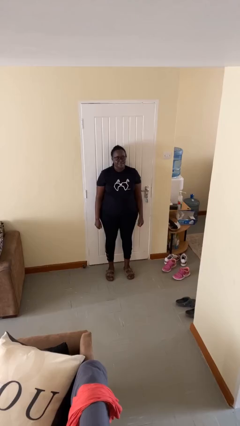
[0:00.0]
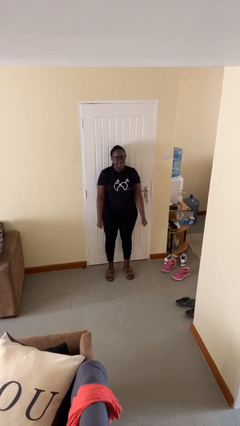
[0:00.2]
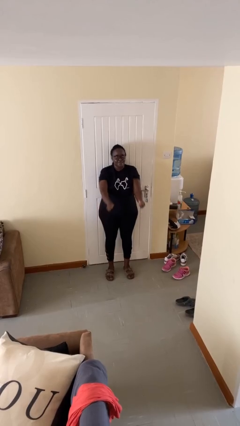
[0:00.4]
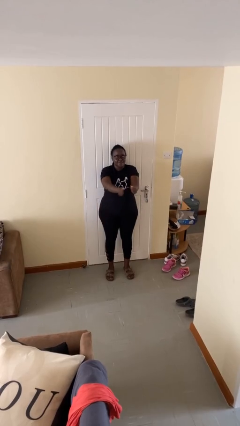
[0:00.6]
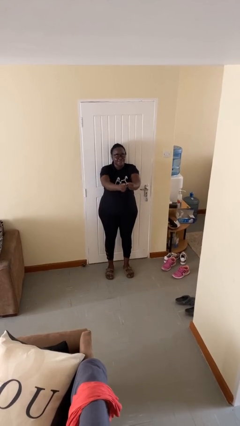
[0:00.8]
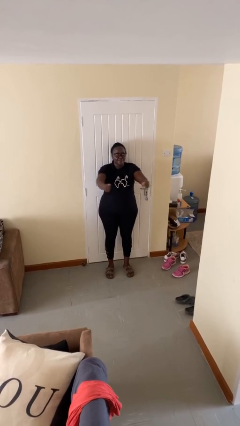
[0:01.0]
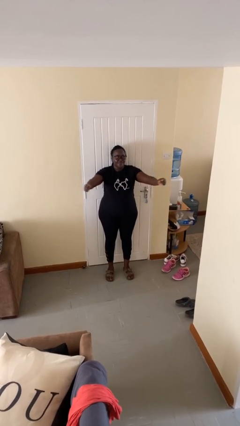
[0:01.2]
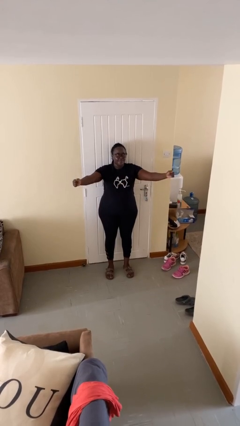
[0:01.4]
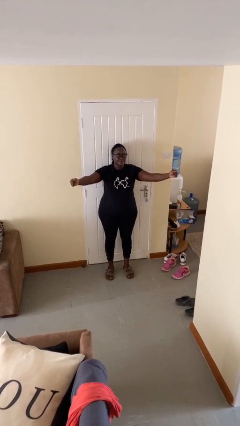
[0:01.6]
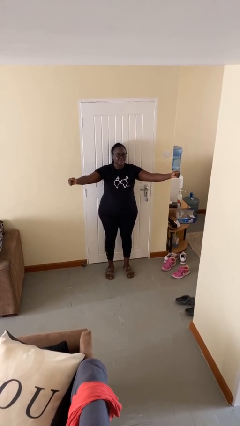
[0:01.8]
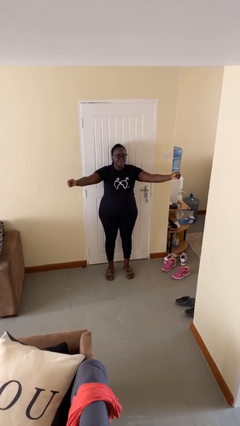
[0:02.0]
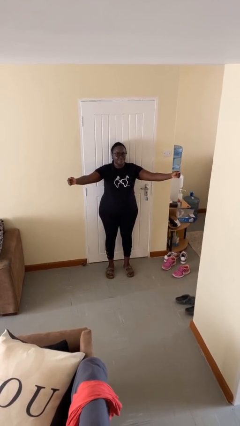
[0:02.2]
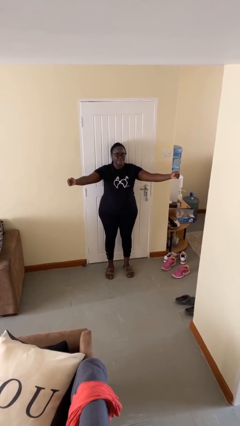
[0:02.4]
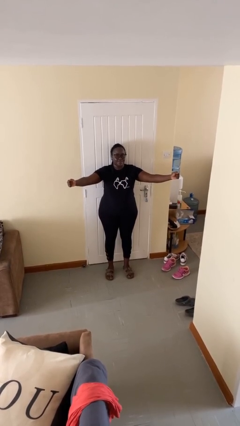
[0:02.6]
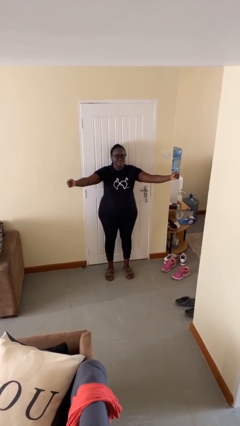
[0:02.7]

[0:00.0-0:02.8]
person gestures zoom in

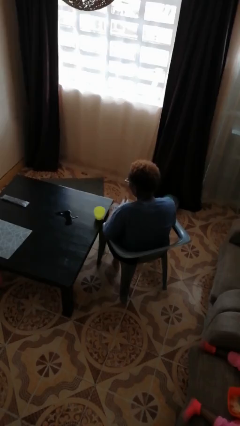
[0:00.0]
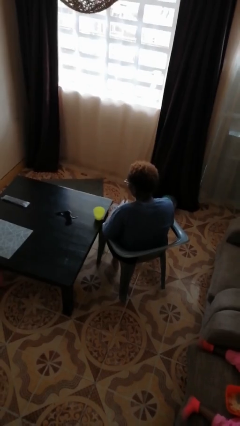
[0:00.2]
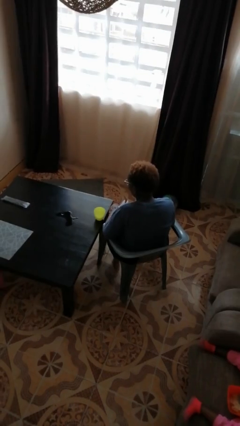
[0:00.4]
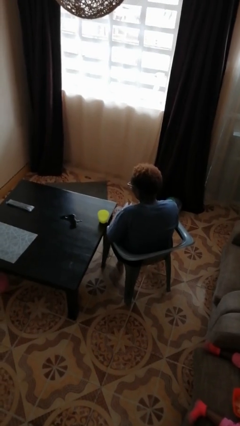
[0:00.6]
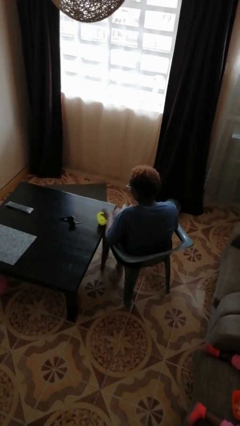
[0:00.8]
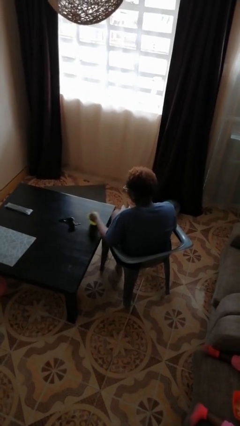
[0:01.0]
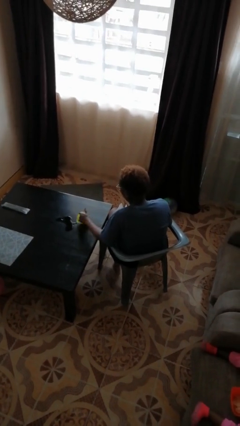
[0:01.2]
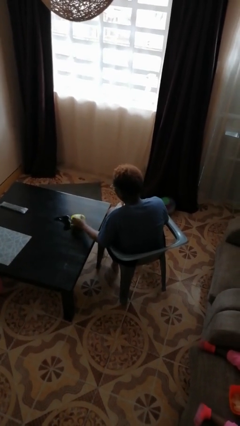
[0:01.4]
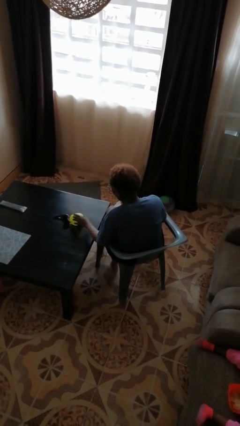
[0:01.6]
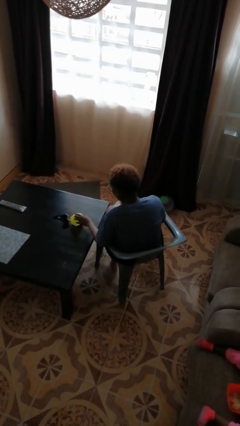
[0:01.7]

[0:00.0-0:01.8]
person spills on table

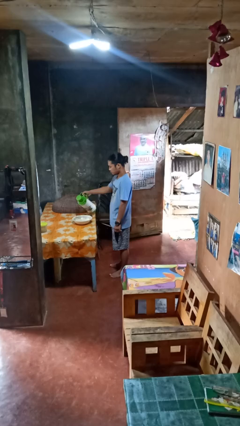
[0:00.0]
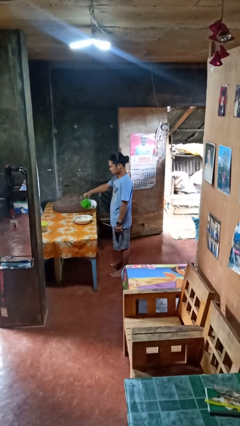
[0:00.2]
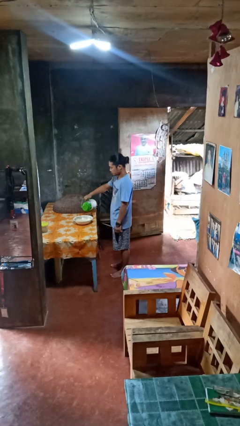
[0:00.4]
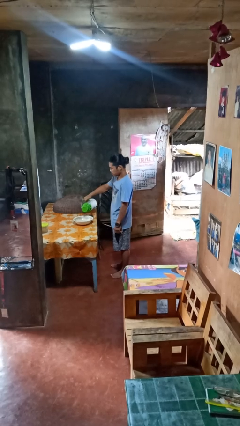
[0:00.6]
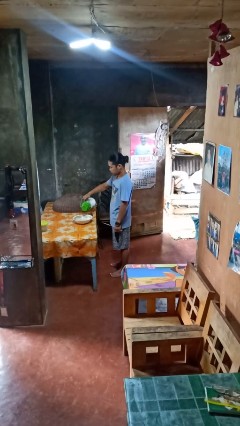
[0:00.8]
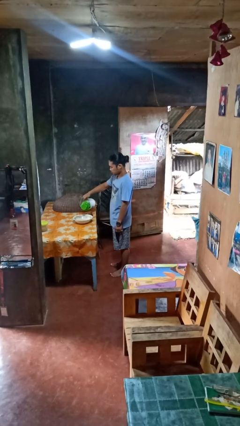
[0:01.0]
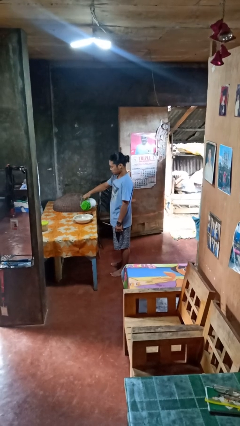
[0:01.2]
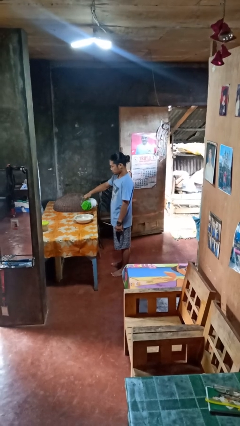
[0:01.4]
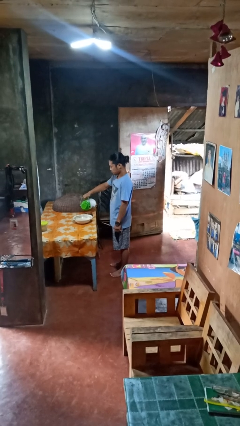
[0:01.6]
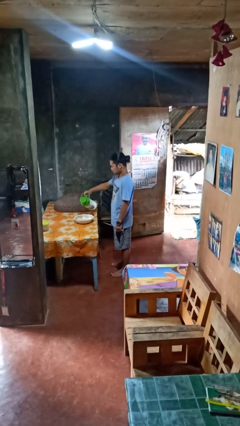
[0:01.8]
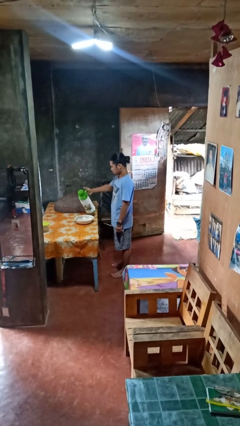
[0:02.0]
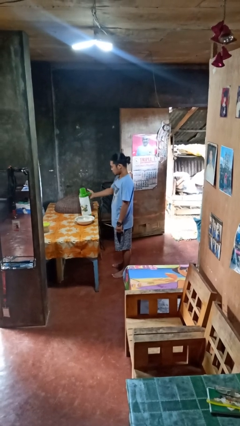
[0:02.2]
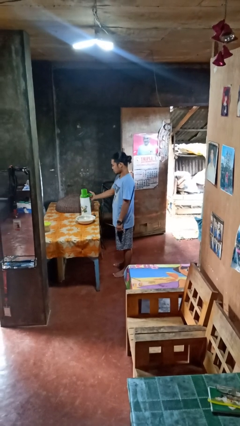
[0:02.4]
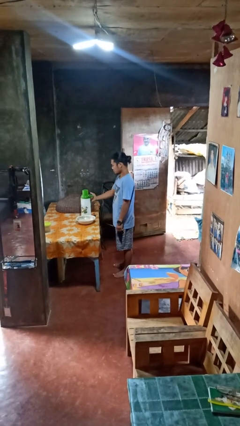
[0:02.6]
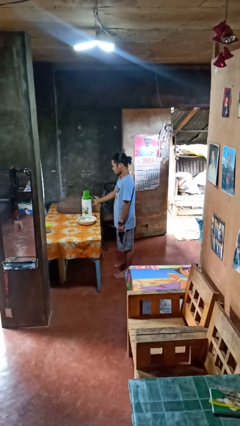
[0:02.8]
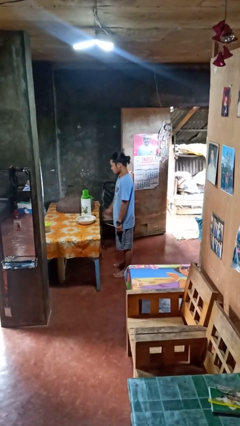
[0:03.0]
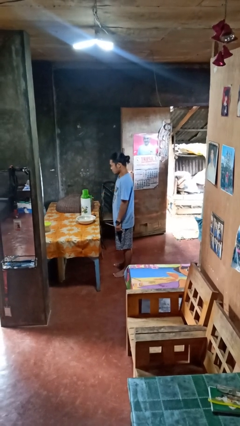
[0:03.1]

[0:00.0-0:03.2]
person pours into bowl

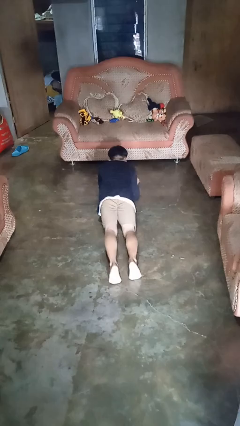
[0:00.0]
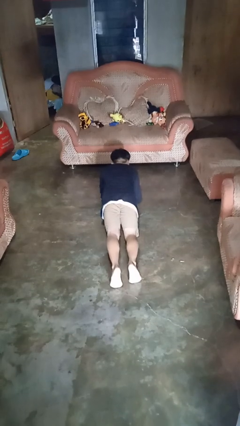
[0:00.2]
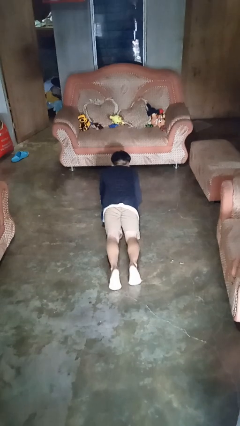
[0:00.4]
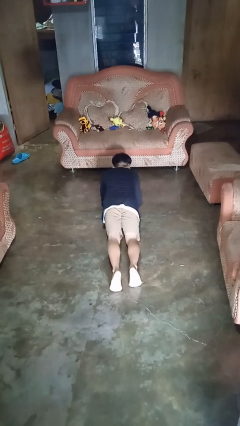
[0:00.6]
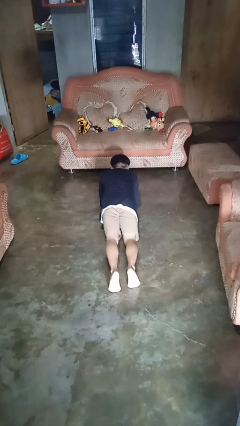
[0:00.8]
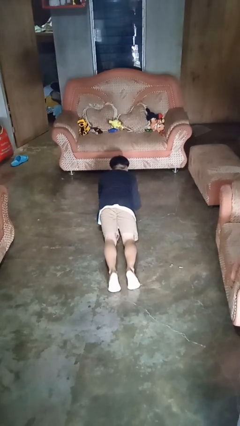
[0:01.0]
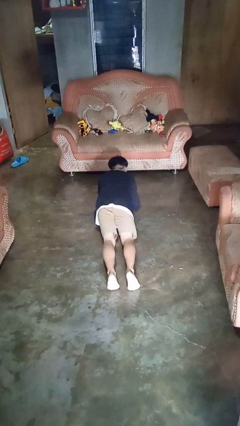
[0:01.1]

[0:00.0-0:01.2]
person exercises with plank

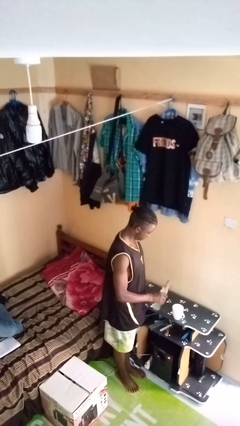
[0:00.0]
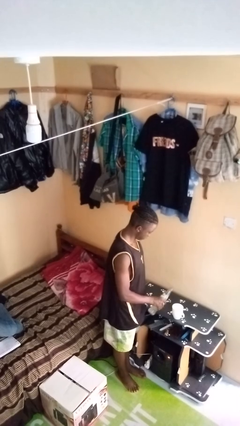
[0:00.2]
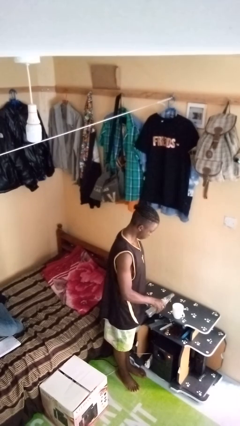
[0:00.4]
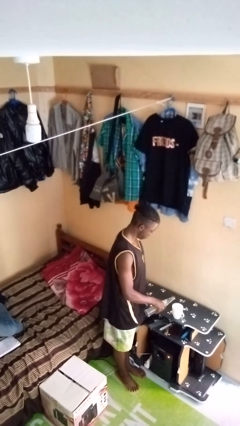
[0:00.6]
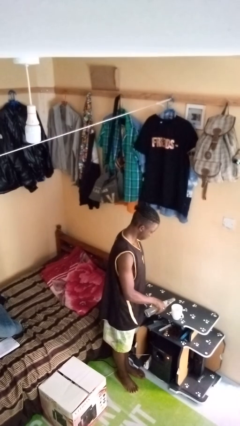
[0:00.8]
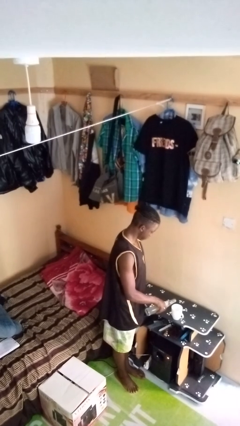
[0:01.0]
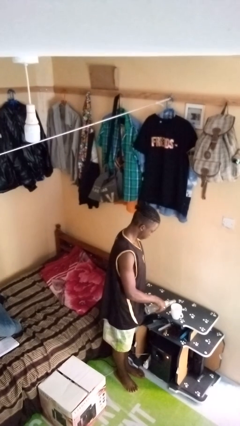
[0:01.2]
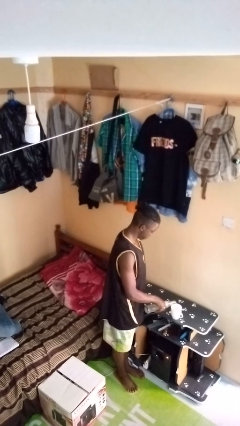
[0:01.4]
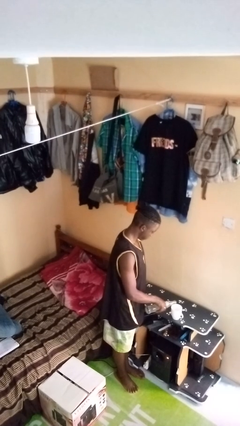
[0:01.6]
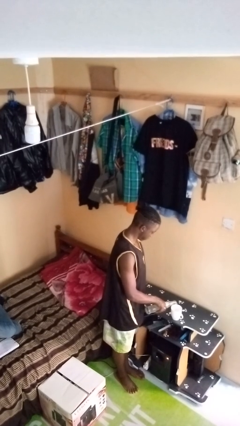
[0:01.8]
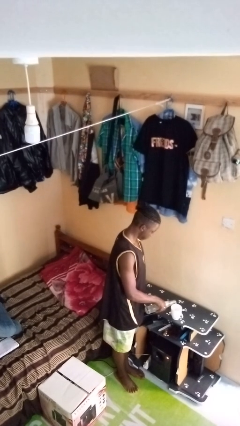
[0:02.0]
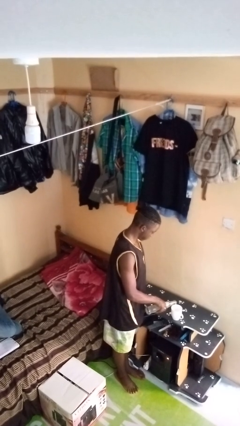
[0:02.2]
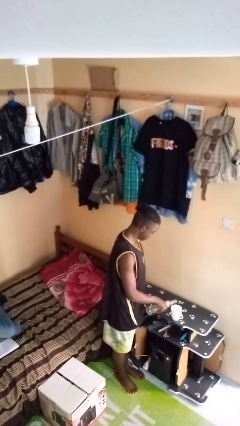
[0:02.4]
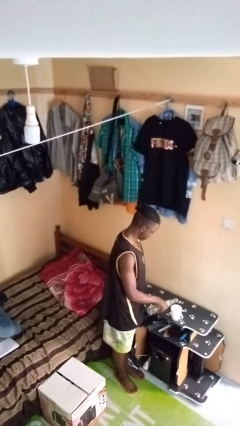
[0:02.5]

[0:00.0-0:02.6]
person pours liquid into cup

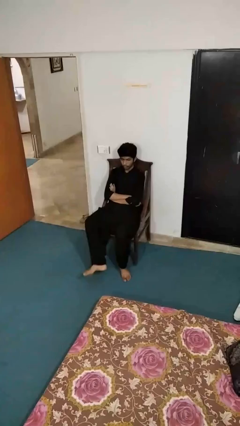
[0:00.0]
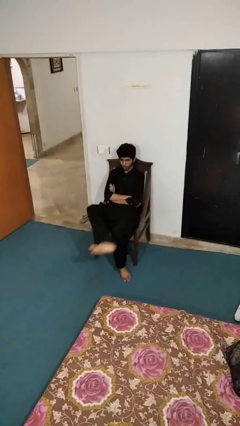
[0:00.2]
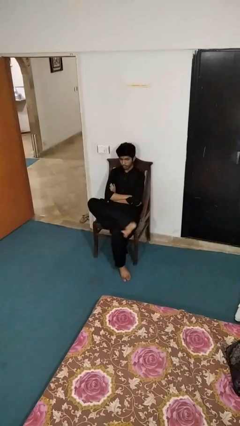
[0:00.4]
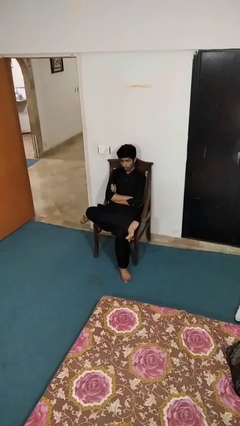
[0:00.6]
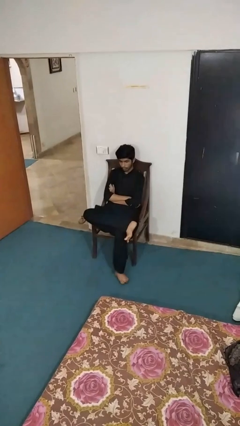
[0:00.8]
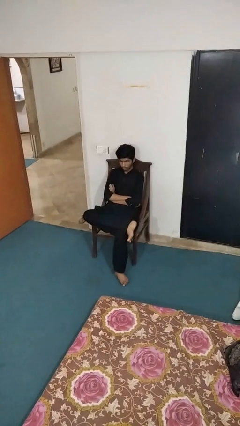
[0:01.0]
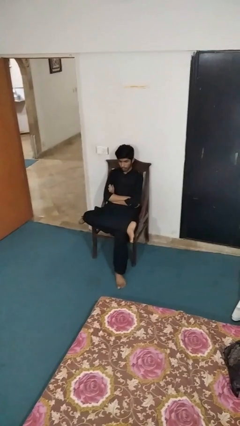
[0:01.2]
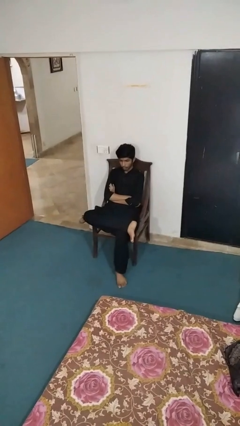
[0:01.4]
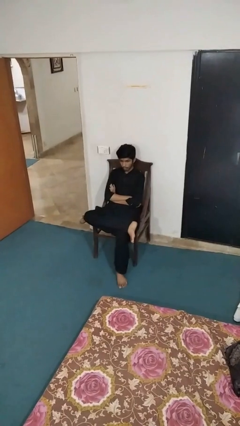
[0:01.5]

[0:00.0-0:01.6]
person crosses legs

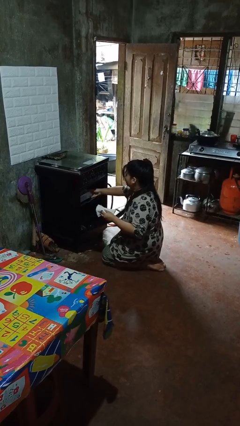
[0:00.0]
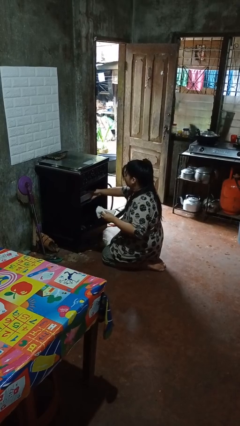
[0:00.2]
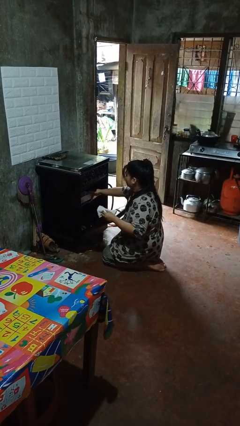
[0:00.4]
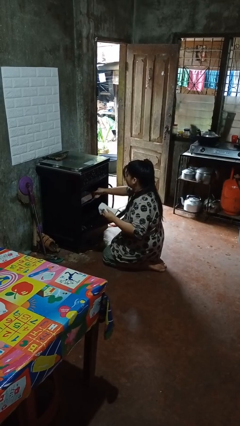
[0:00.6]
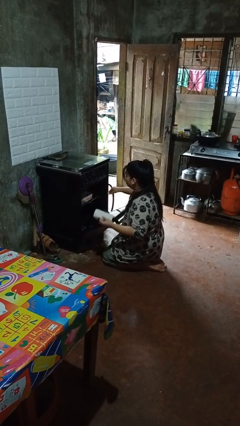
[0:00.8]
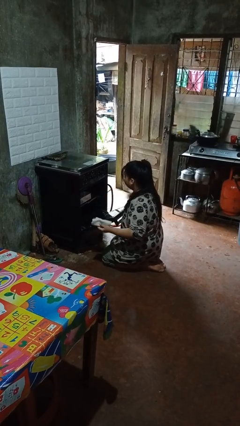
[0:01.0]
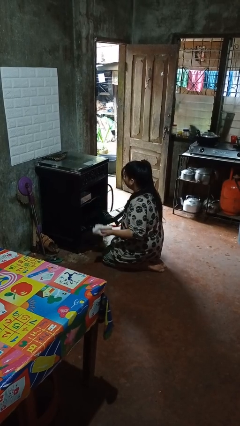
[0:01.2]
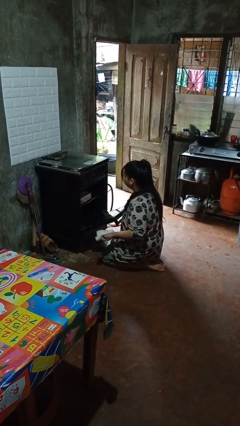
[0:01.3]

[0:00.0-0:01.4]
person puts object into oven

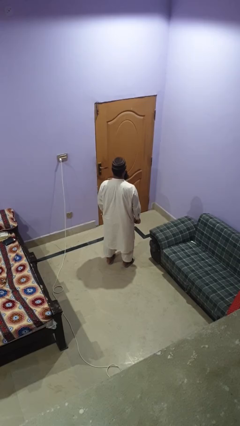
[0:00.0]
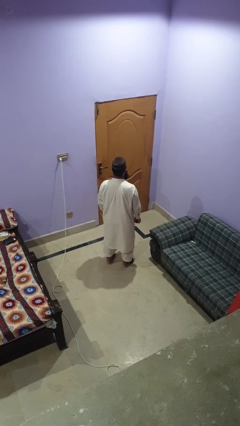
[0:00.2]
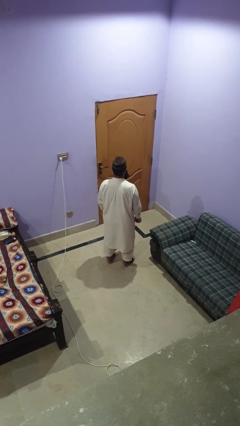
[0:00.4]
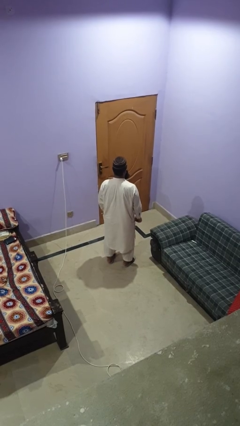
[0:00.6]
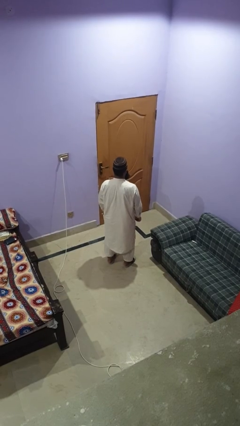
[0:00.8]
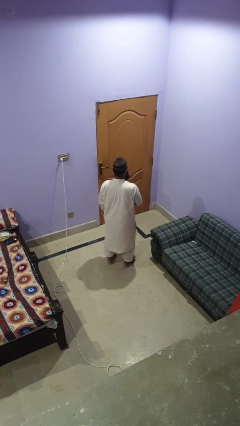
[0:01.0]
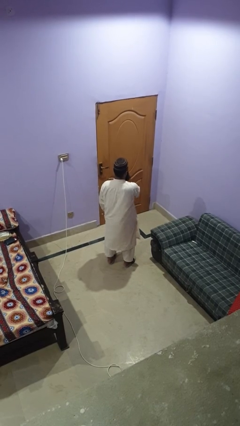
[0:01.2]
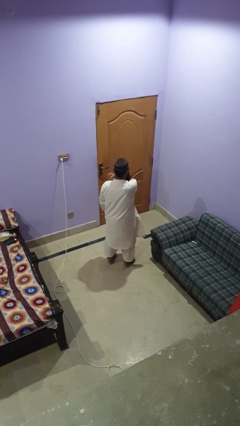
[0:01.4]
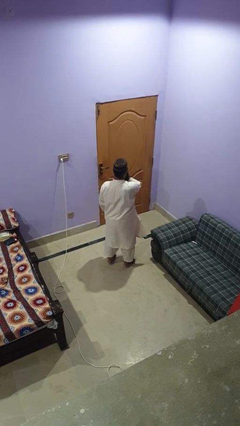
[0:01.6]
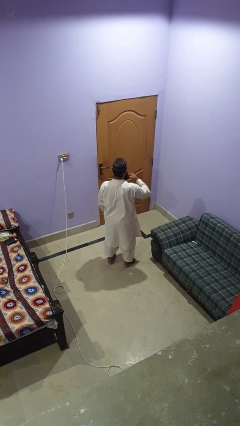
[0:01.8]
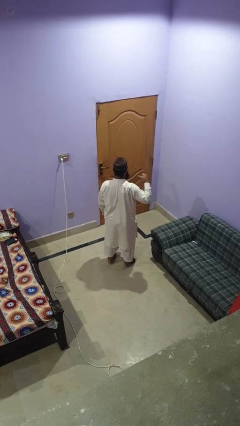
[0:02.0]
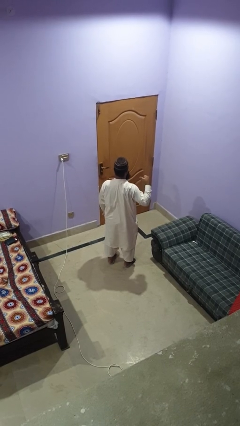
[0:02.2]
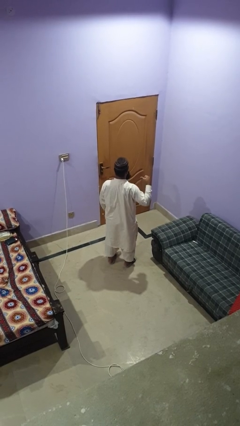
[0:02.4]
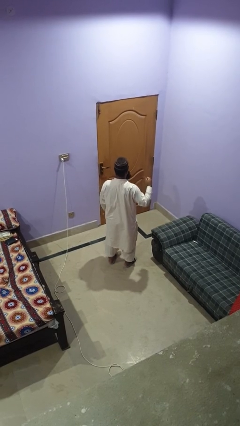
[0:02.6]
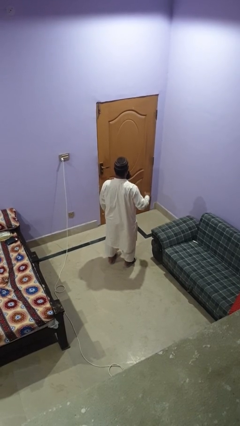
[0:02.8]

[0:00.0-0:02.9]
person gestures cut
